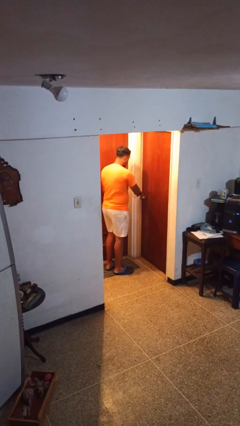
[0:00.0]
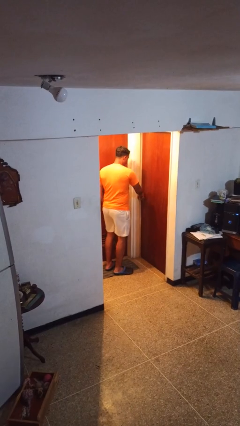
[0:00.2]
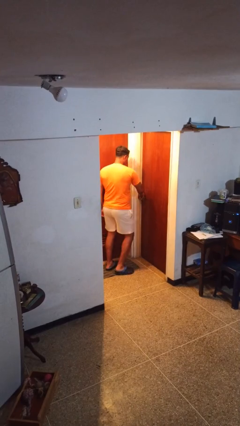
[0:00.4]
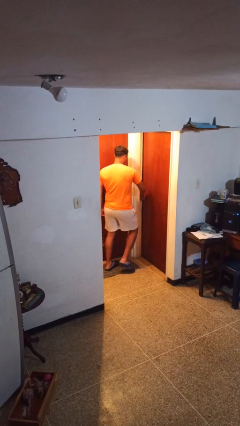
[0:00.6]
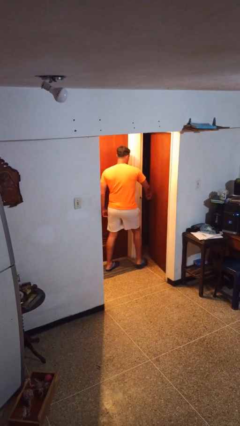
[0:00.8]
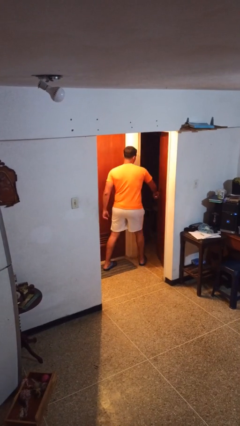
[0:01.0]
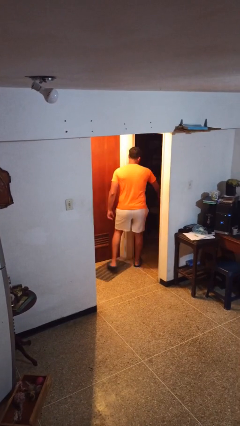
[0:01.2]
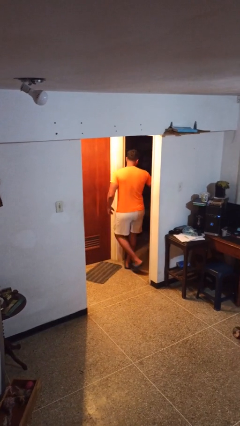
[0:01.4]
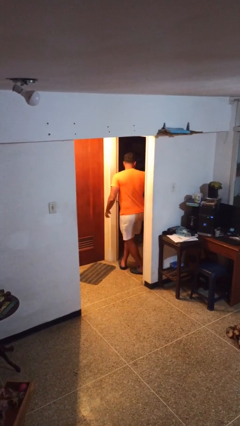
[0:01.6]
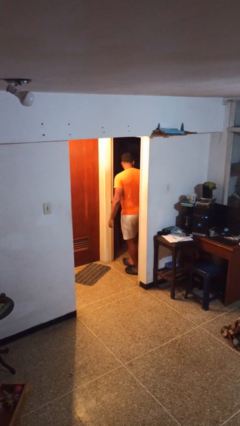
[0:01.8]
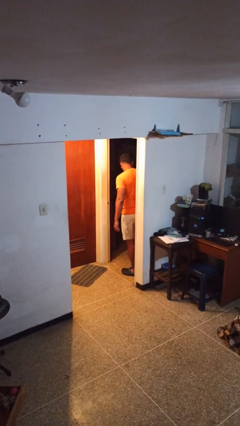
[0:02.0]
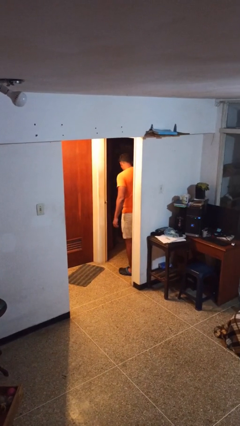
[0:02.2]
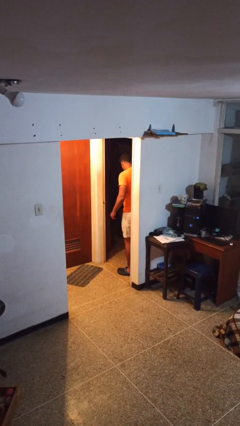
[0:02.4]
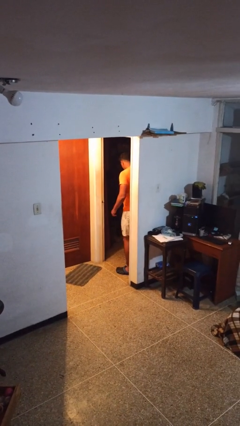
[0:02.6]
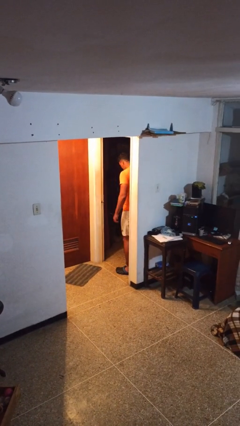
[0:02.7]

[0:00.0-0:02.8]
person opens facility door

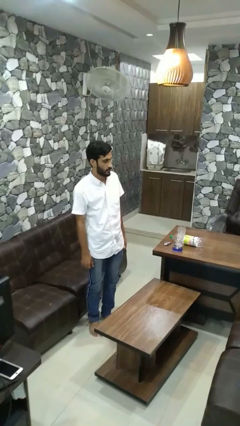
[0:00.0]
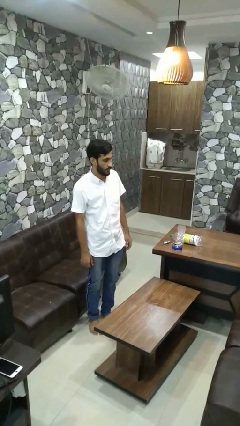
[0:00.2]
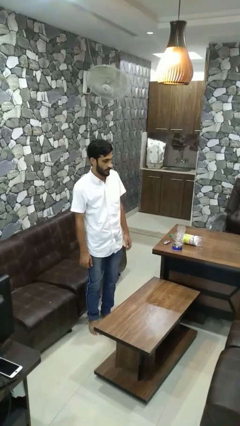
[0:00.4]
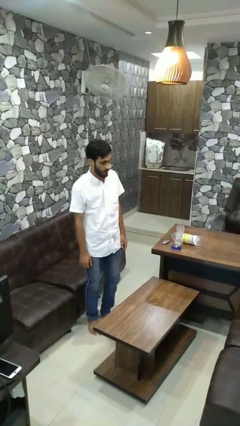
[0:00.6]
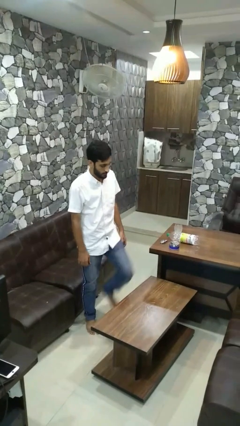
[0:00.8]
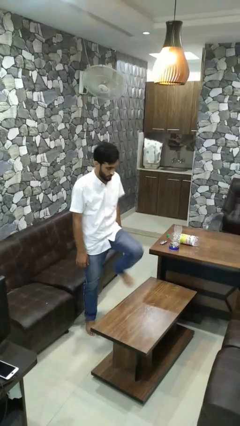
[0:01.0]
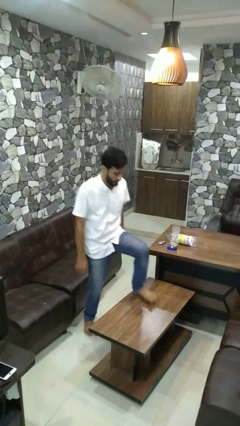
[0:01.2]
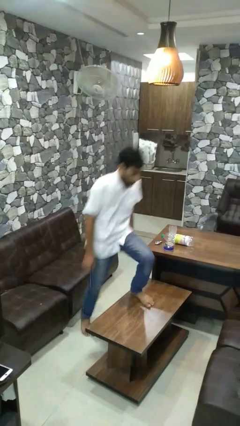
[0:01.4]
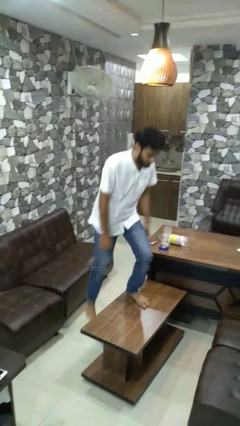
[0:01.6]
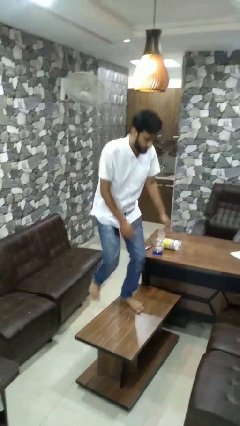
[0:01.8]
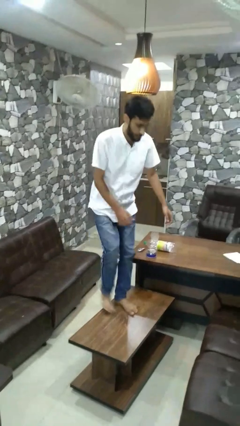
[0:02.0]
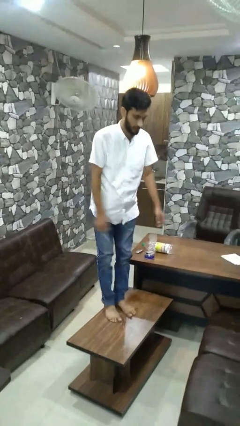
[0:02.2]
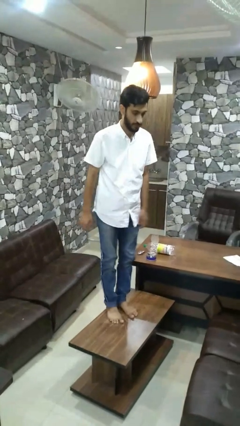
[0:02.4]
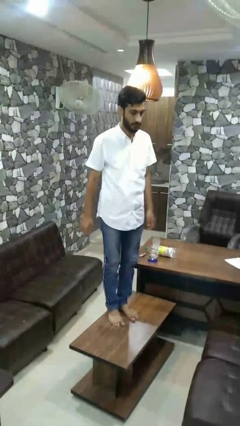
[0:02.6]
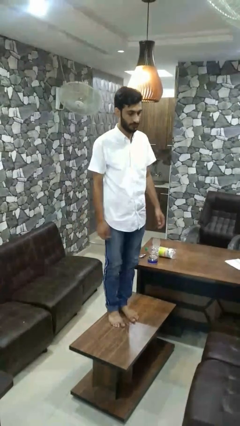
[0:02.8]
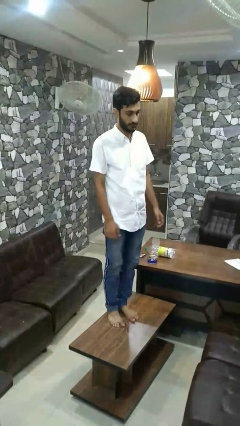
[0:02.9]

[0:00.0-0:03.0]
person climbs on table

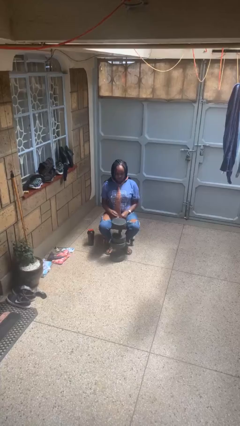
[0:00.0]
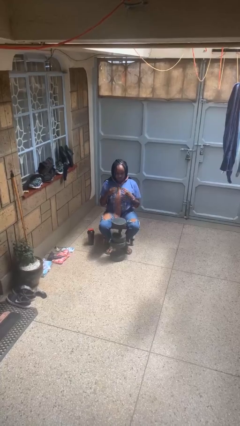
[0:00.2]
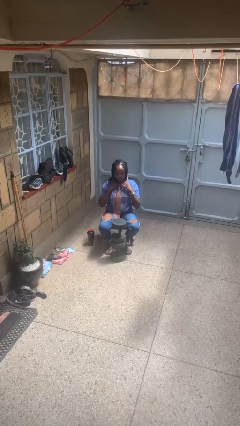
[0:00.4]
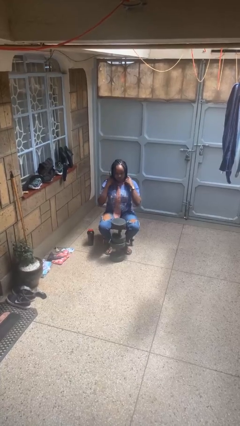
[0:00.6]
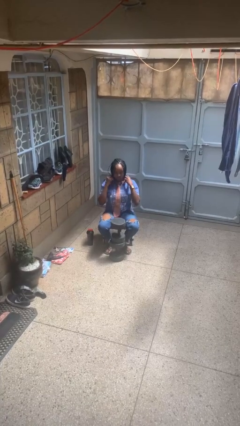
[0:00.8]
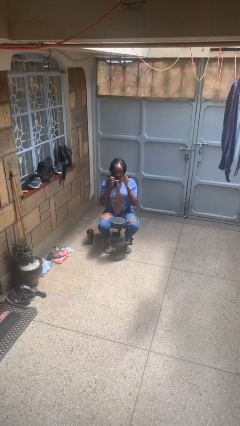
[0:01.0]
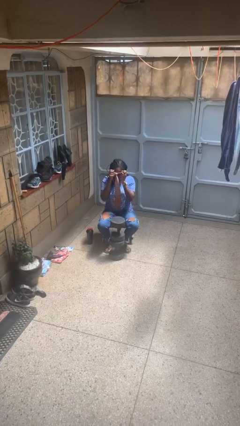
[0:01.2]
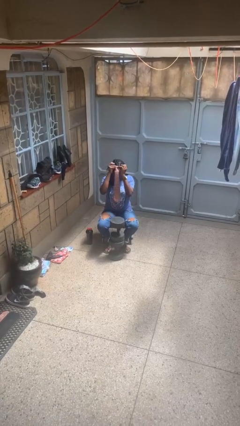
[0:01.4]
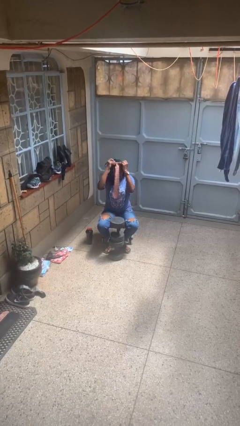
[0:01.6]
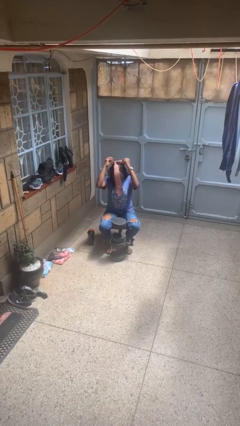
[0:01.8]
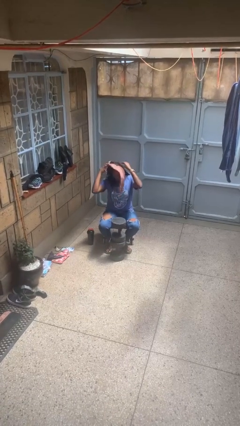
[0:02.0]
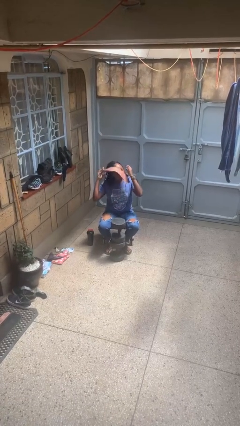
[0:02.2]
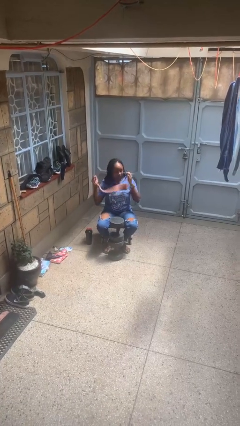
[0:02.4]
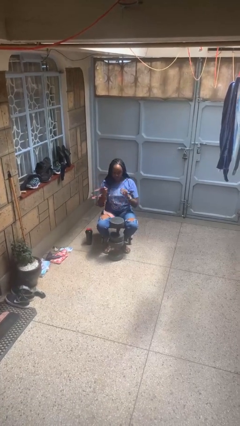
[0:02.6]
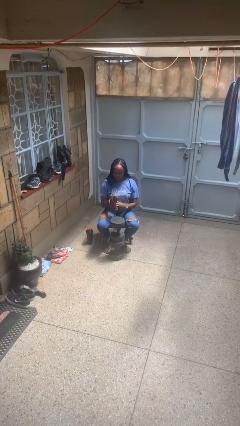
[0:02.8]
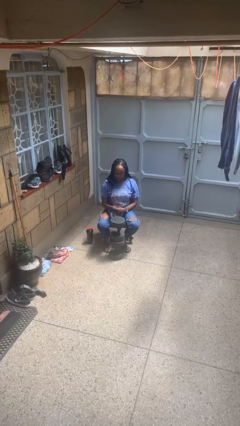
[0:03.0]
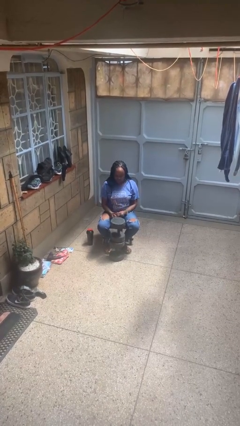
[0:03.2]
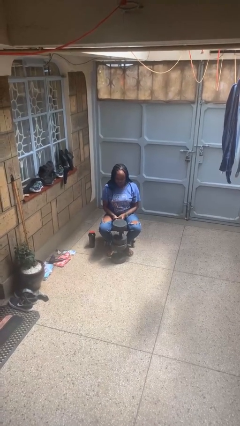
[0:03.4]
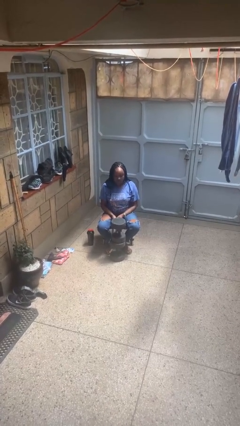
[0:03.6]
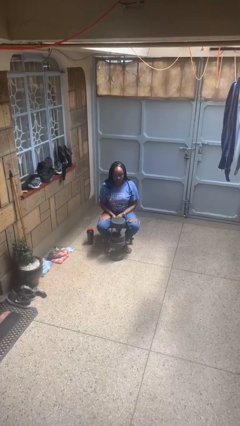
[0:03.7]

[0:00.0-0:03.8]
person takes off necktie

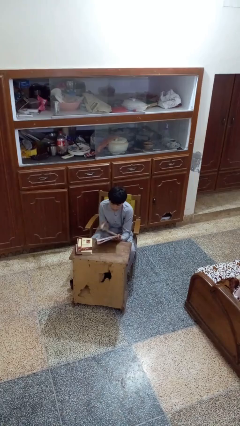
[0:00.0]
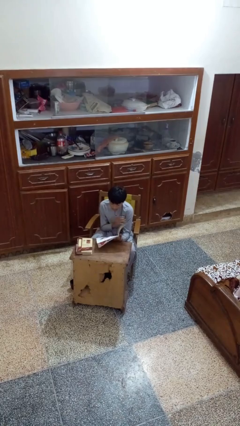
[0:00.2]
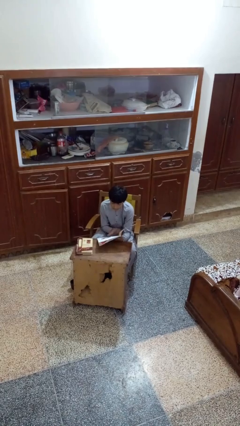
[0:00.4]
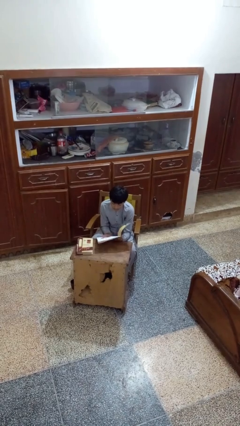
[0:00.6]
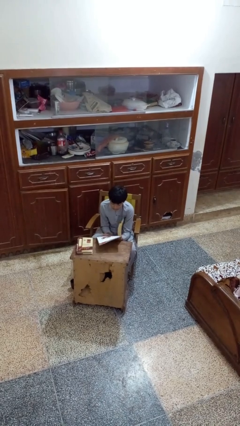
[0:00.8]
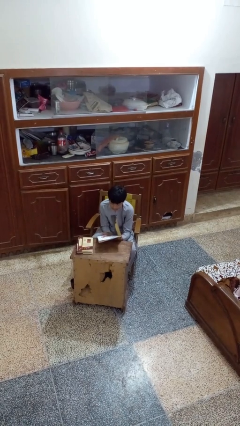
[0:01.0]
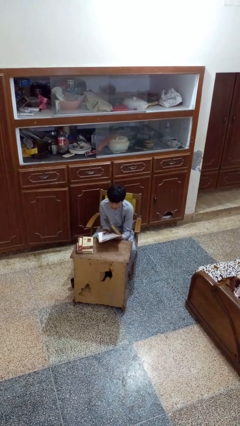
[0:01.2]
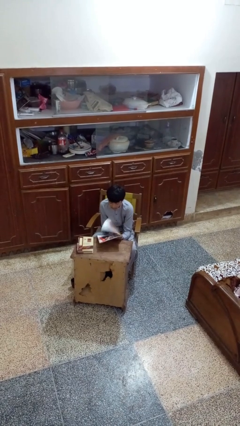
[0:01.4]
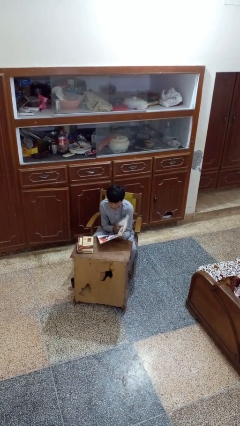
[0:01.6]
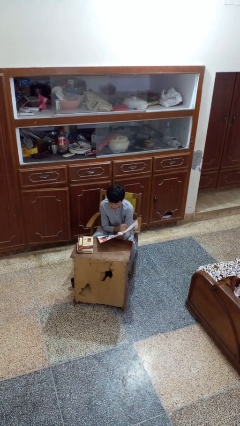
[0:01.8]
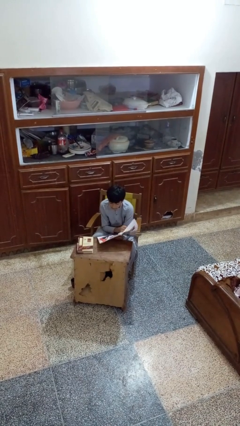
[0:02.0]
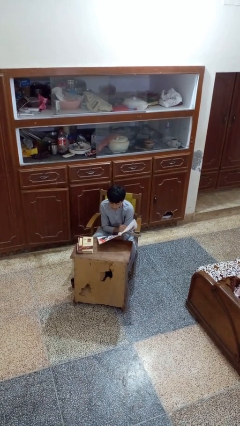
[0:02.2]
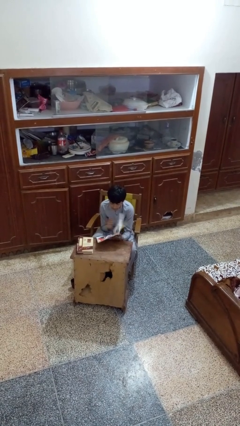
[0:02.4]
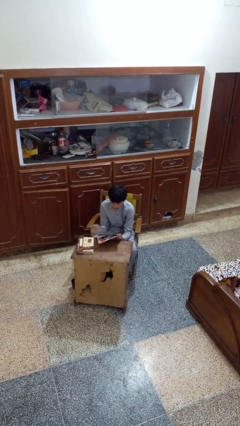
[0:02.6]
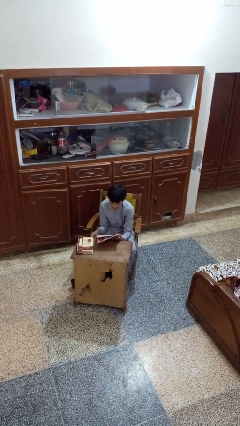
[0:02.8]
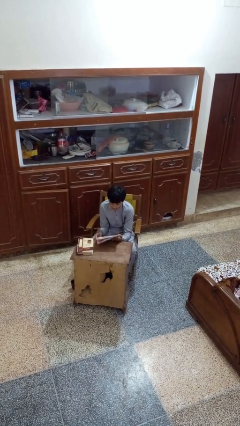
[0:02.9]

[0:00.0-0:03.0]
person reads magazine

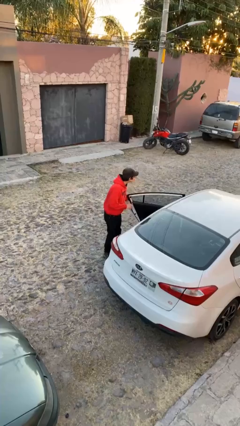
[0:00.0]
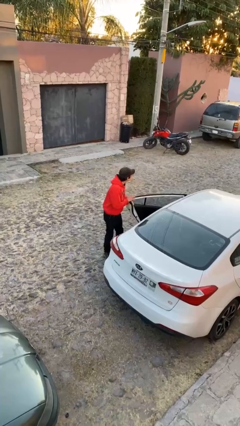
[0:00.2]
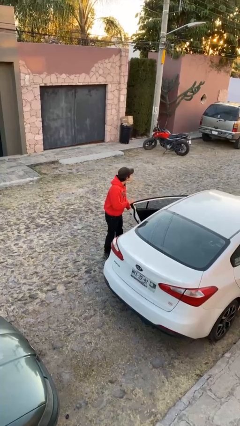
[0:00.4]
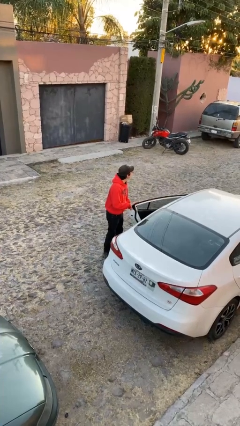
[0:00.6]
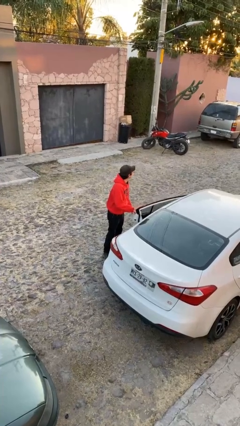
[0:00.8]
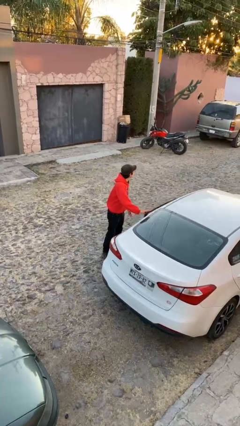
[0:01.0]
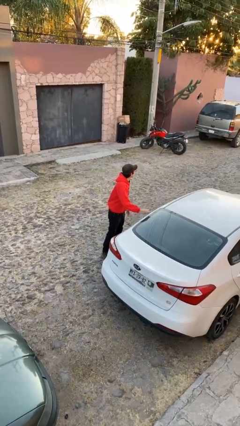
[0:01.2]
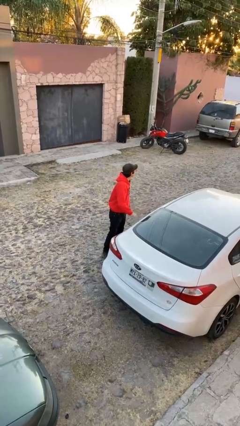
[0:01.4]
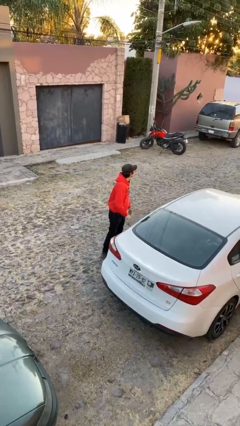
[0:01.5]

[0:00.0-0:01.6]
person closes car door

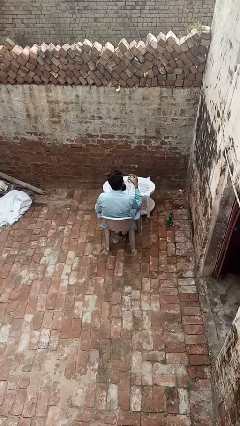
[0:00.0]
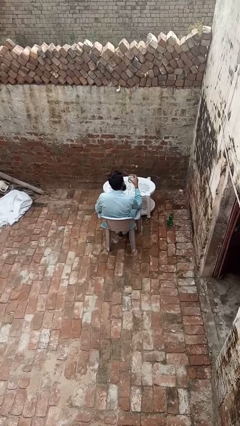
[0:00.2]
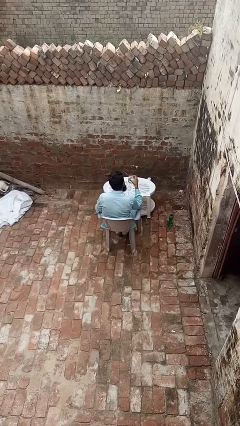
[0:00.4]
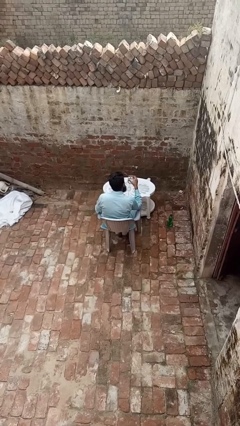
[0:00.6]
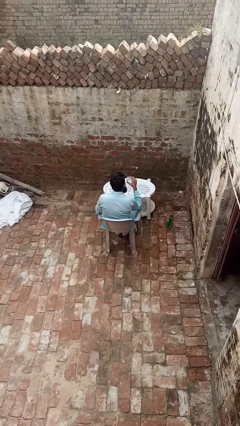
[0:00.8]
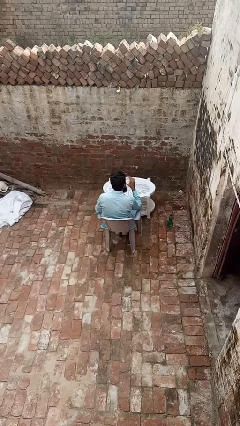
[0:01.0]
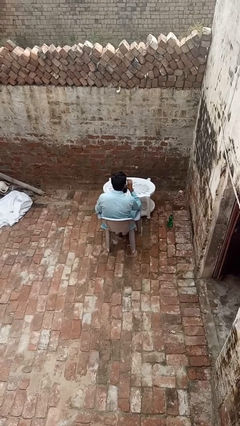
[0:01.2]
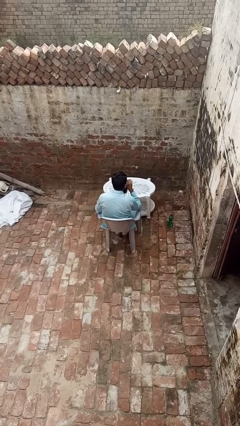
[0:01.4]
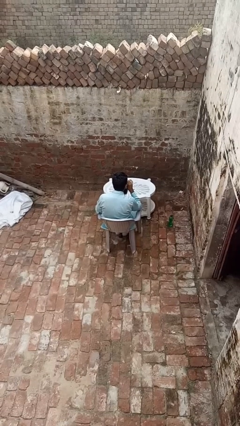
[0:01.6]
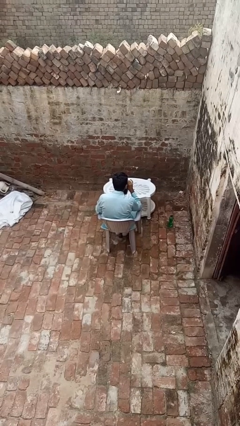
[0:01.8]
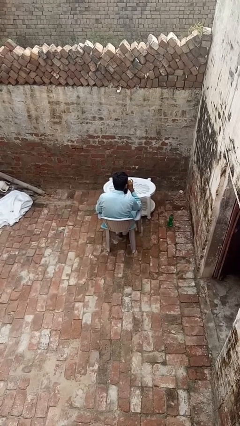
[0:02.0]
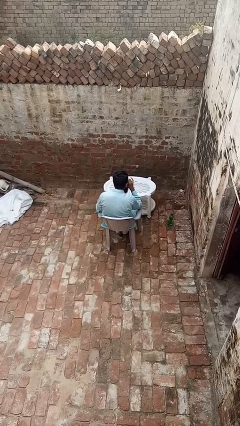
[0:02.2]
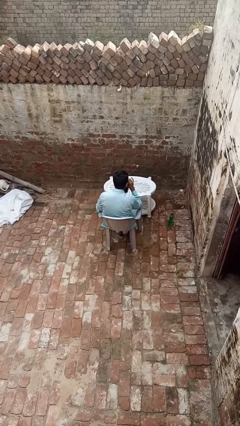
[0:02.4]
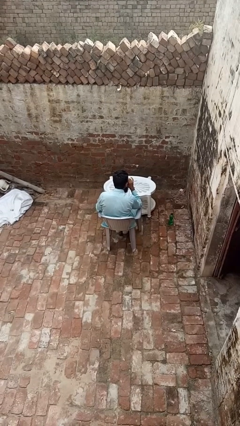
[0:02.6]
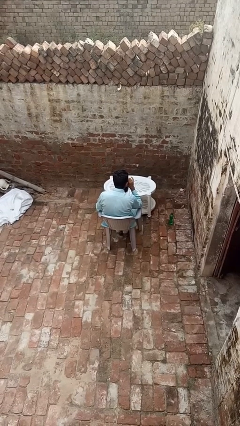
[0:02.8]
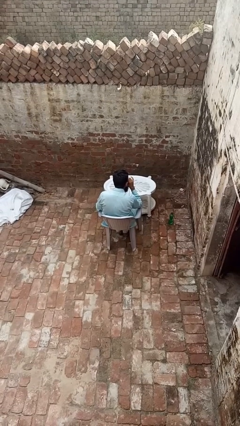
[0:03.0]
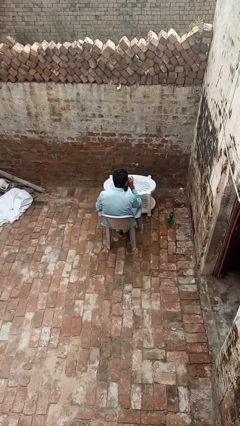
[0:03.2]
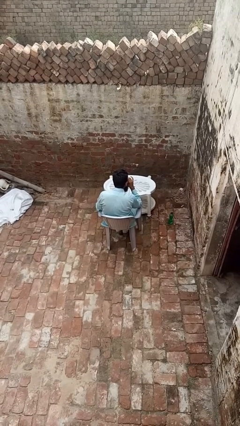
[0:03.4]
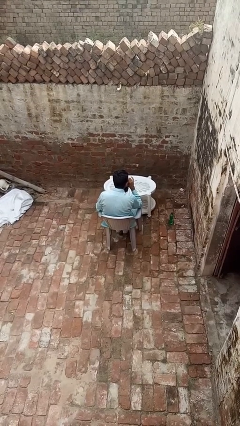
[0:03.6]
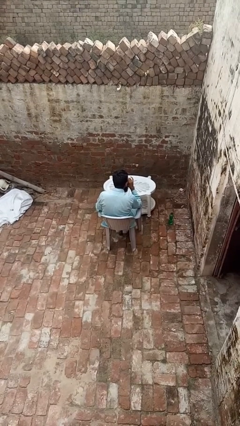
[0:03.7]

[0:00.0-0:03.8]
person drinks from shotglass
